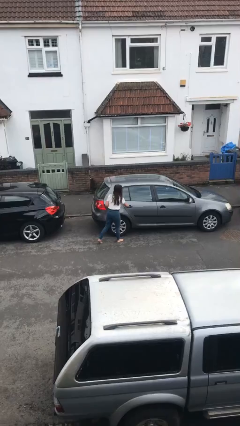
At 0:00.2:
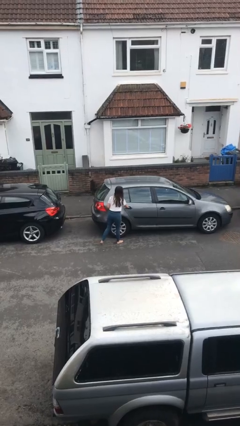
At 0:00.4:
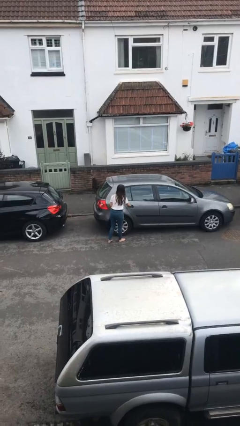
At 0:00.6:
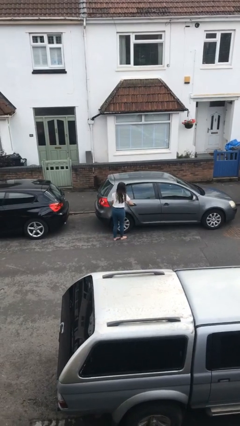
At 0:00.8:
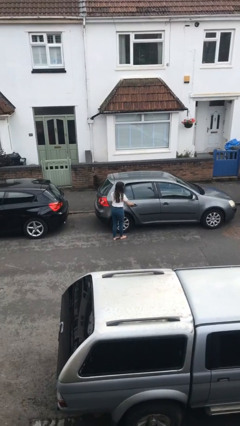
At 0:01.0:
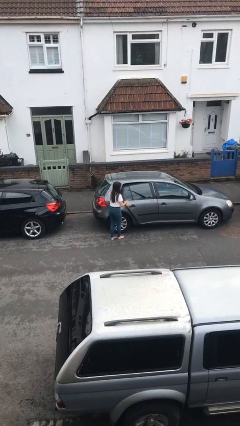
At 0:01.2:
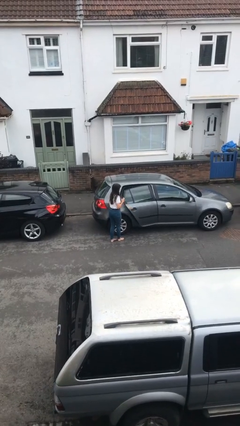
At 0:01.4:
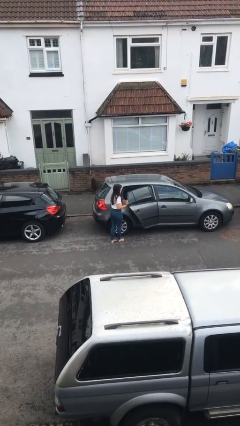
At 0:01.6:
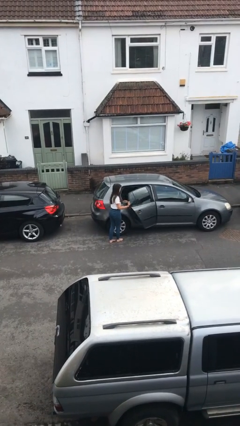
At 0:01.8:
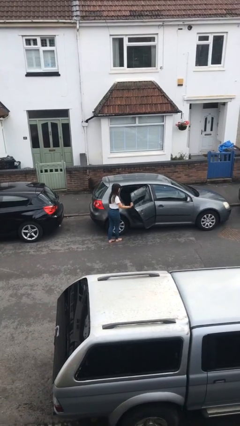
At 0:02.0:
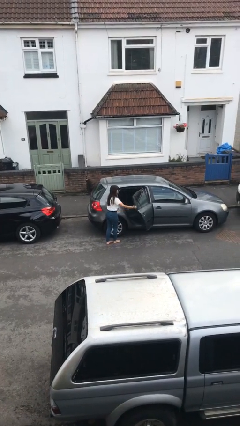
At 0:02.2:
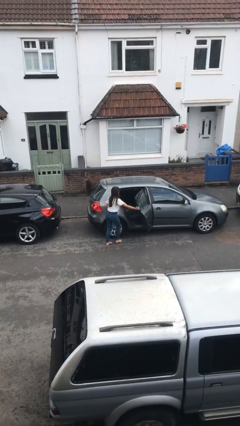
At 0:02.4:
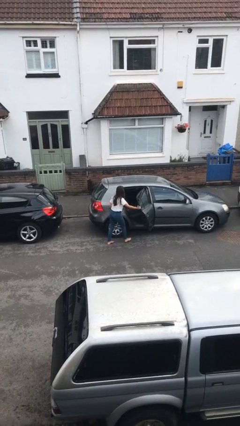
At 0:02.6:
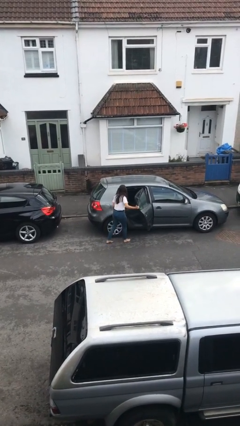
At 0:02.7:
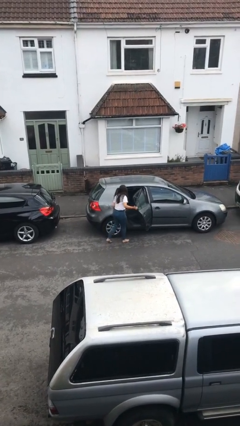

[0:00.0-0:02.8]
person opens car door

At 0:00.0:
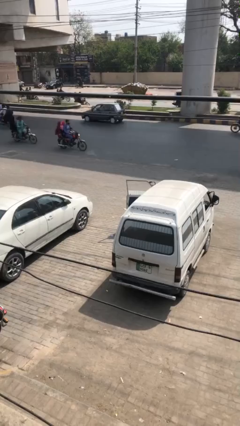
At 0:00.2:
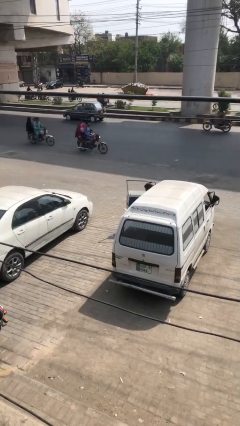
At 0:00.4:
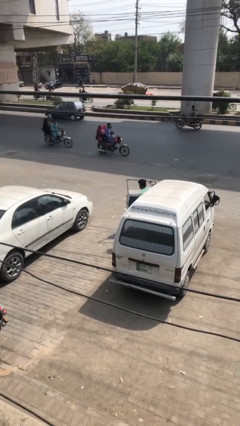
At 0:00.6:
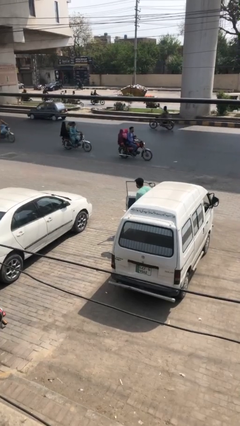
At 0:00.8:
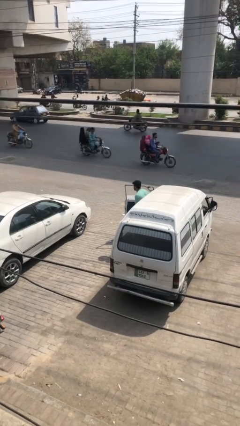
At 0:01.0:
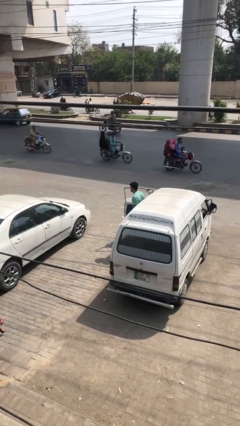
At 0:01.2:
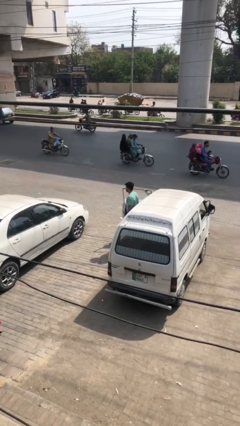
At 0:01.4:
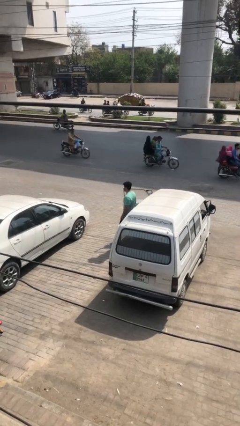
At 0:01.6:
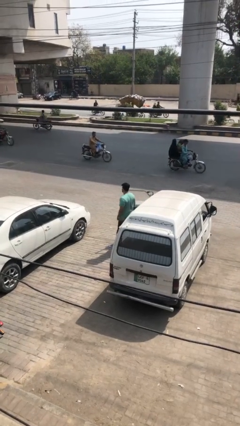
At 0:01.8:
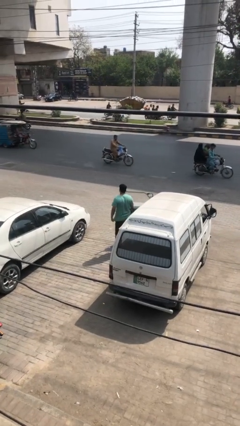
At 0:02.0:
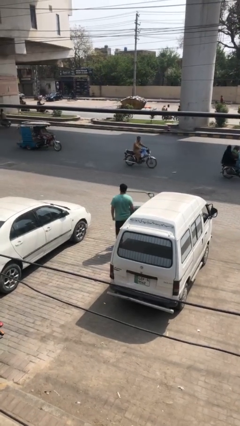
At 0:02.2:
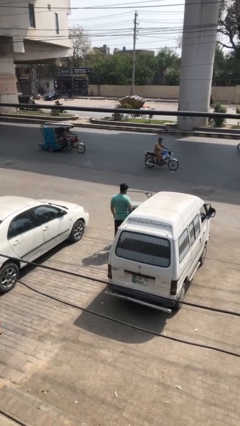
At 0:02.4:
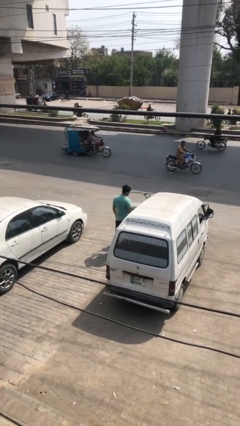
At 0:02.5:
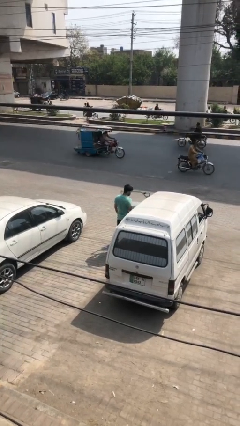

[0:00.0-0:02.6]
person exits car

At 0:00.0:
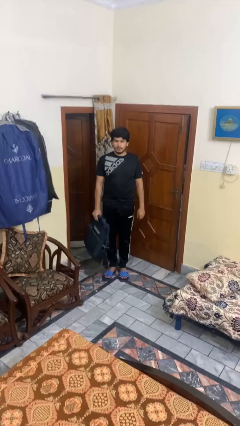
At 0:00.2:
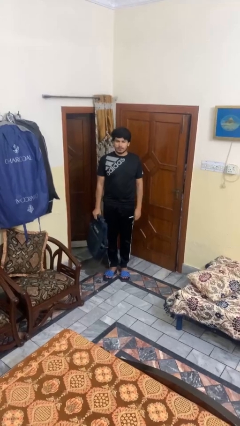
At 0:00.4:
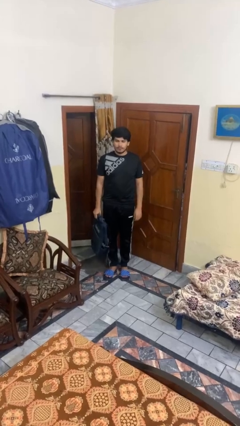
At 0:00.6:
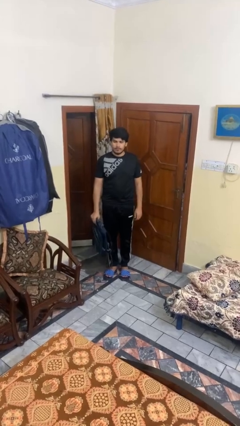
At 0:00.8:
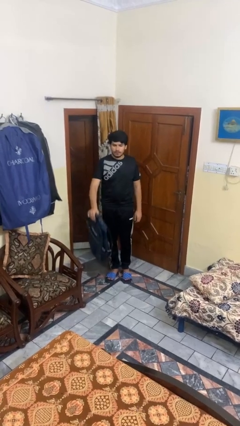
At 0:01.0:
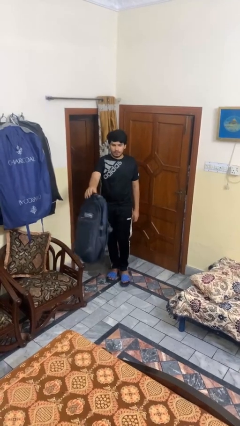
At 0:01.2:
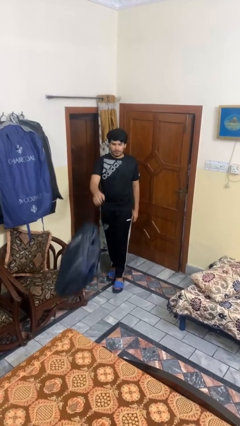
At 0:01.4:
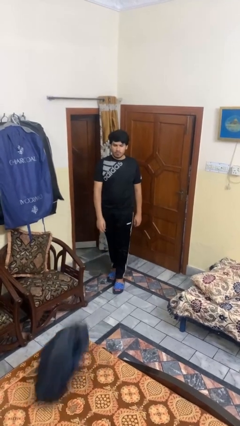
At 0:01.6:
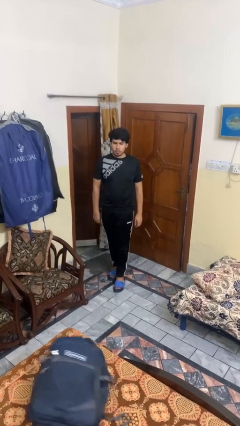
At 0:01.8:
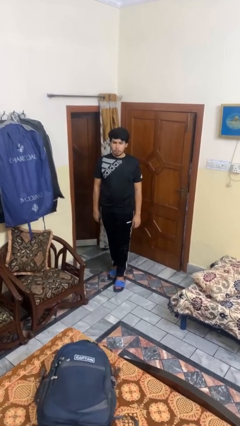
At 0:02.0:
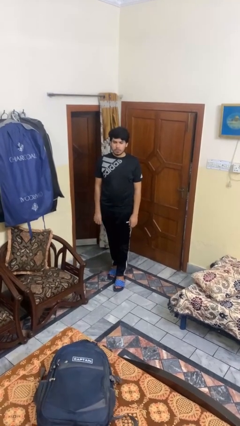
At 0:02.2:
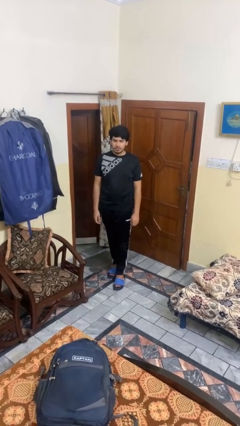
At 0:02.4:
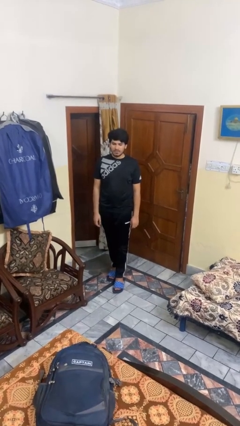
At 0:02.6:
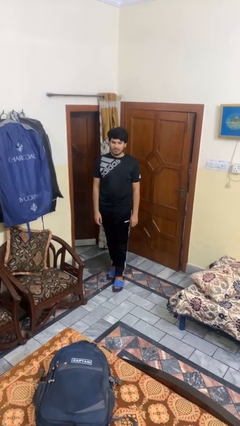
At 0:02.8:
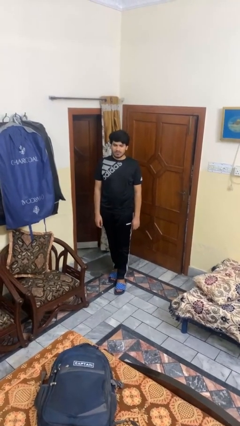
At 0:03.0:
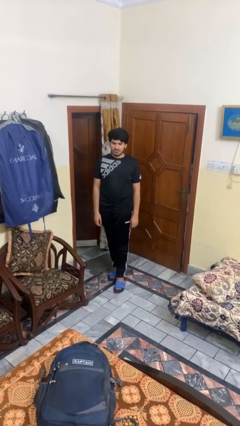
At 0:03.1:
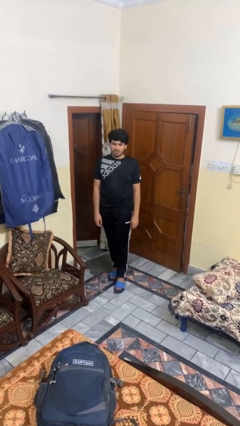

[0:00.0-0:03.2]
person throws object on bed

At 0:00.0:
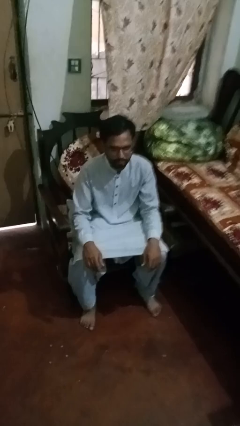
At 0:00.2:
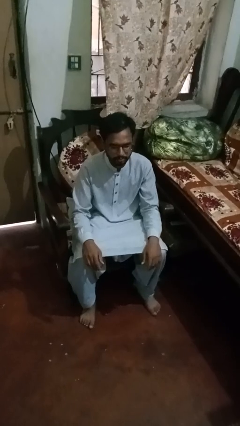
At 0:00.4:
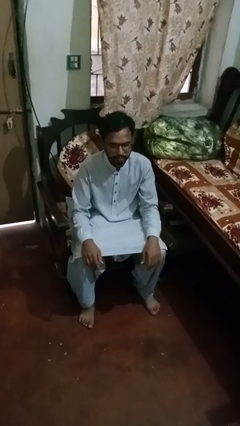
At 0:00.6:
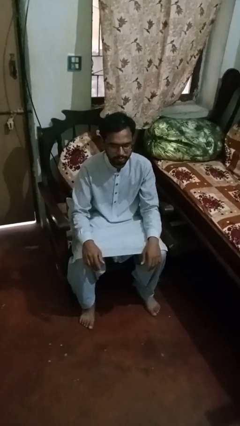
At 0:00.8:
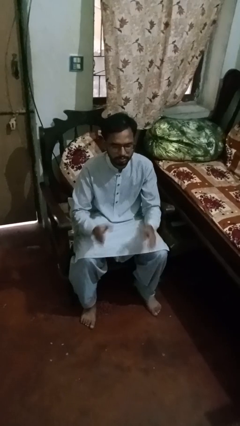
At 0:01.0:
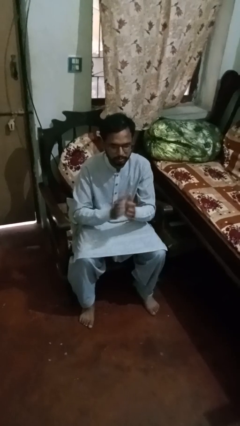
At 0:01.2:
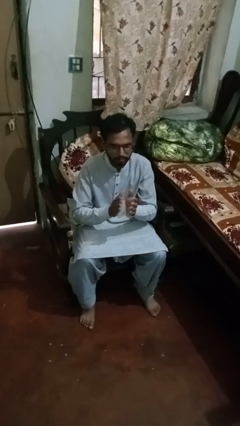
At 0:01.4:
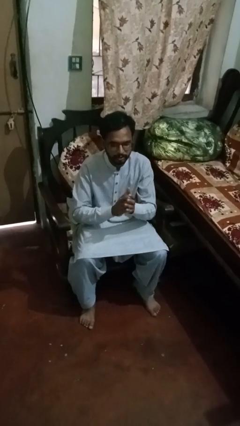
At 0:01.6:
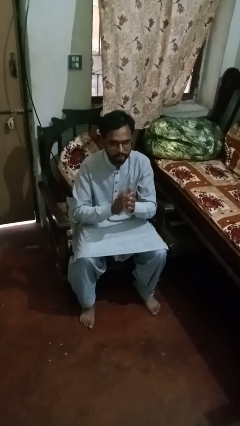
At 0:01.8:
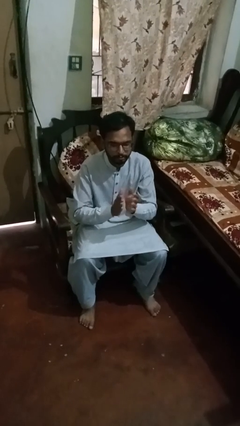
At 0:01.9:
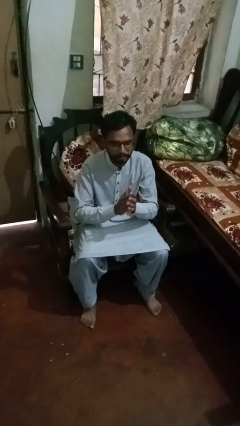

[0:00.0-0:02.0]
person claps hands

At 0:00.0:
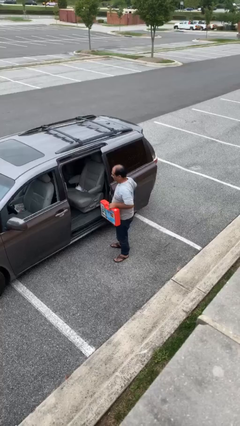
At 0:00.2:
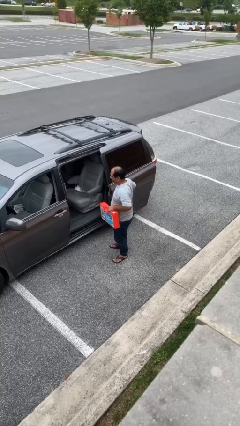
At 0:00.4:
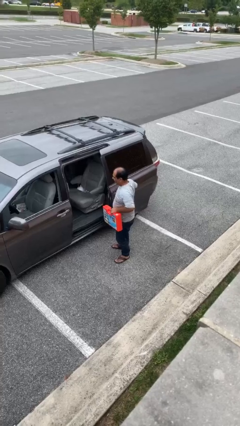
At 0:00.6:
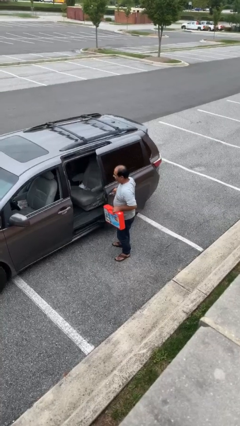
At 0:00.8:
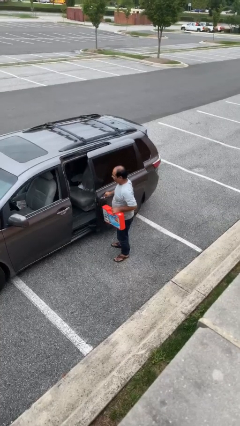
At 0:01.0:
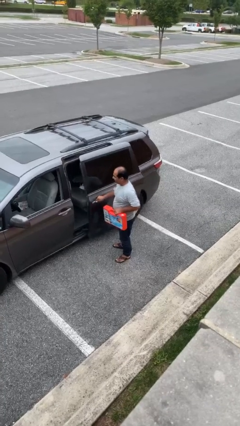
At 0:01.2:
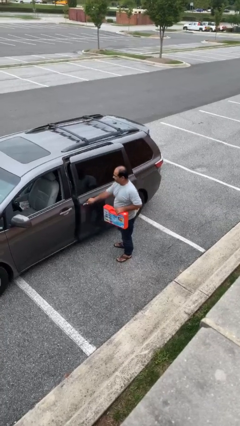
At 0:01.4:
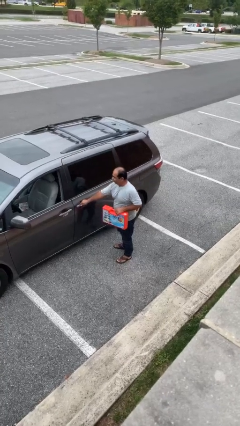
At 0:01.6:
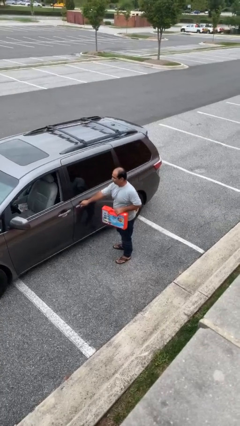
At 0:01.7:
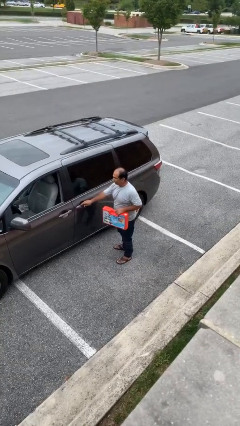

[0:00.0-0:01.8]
person closes car door

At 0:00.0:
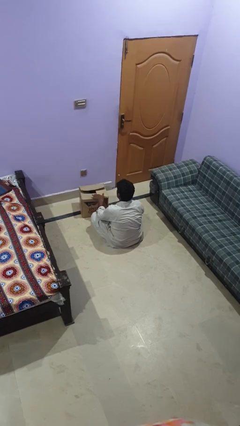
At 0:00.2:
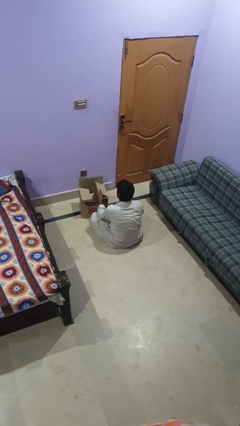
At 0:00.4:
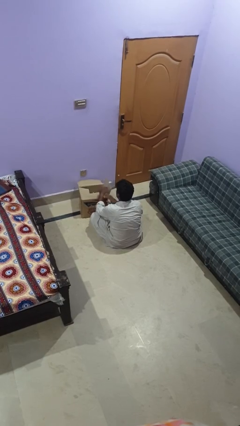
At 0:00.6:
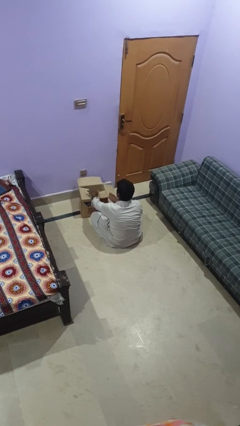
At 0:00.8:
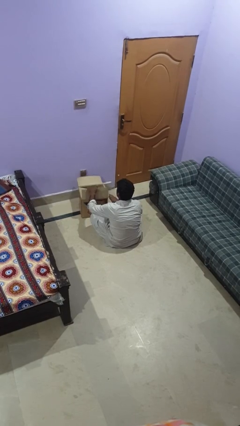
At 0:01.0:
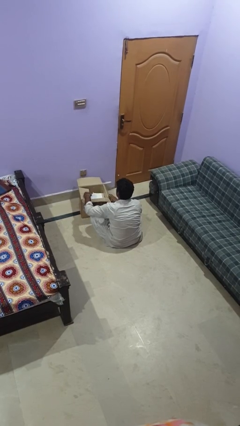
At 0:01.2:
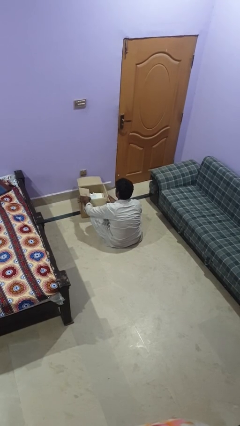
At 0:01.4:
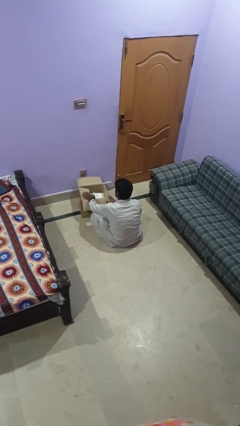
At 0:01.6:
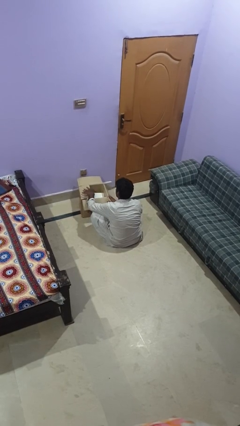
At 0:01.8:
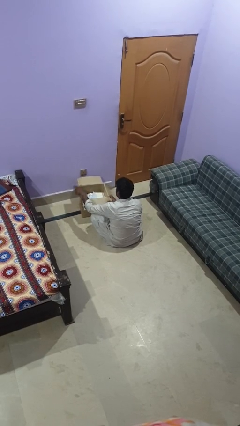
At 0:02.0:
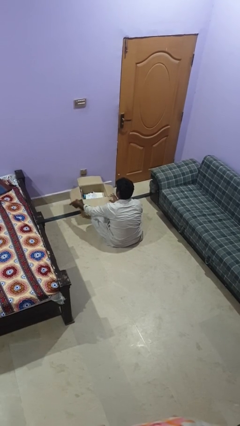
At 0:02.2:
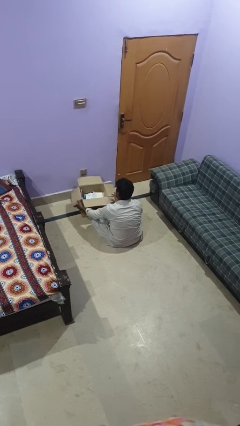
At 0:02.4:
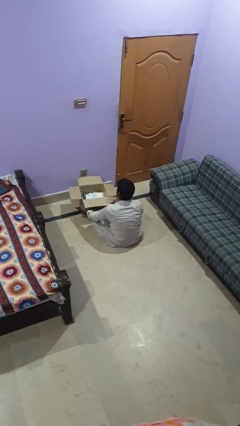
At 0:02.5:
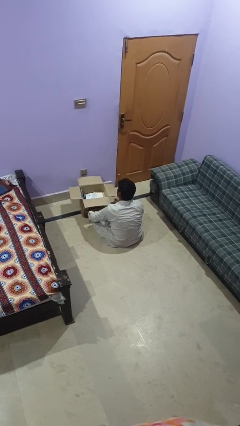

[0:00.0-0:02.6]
person opens box

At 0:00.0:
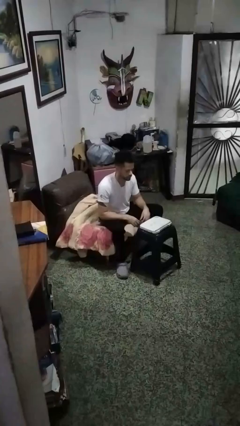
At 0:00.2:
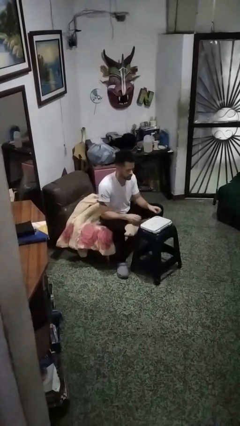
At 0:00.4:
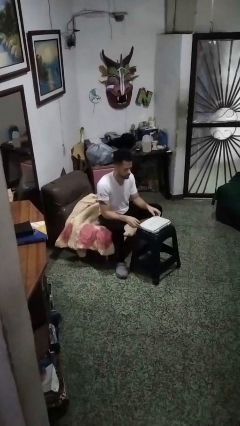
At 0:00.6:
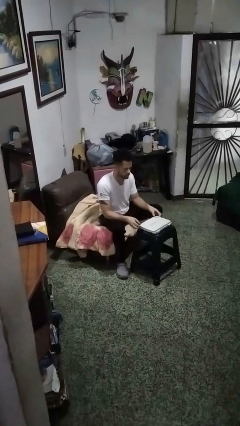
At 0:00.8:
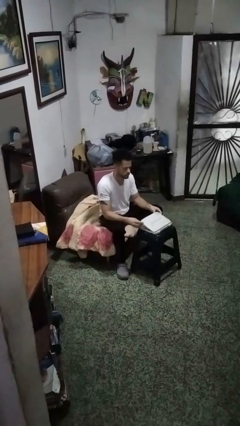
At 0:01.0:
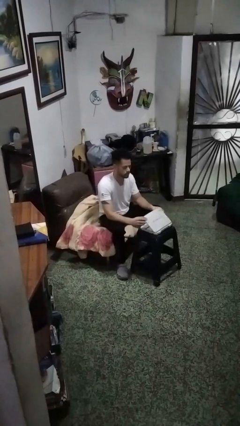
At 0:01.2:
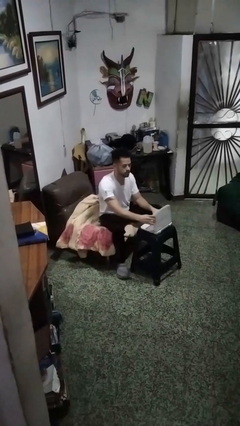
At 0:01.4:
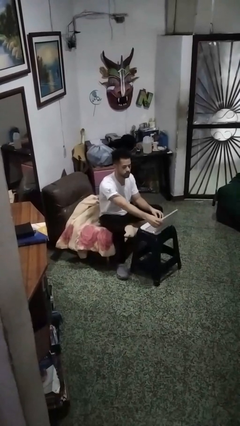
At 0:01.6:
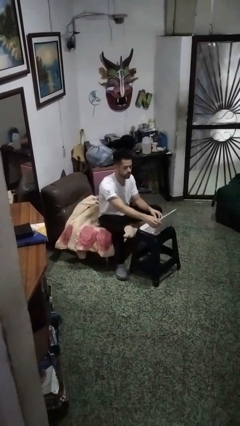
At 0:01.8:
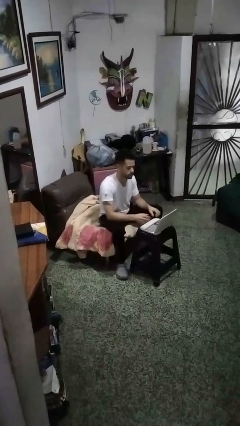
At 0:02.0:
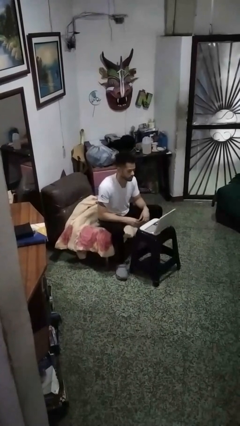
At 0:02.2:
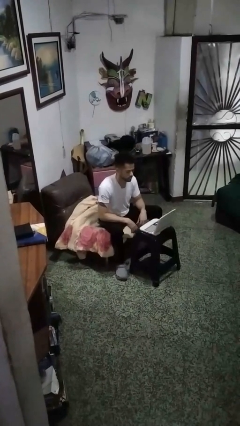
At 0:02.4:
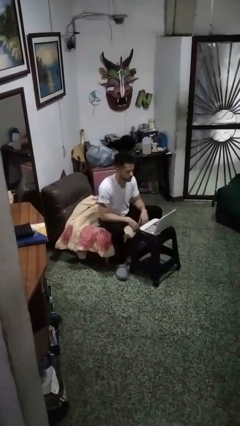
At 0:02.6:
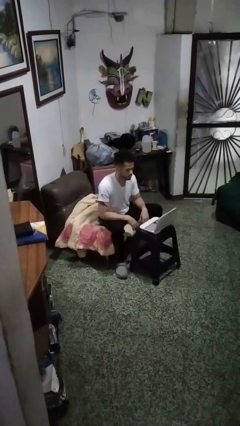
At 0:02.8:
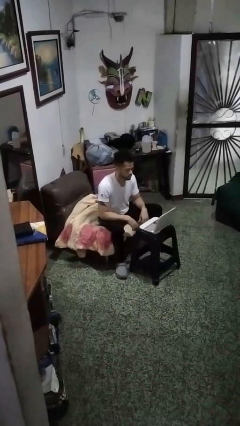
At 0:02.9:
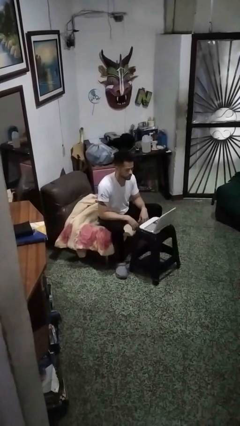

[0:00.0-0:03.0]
person opens laptop
